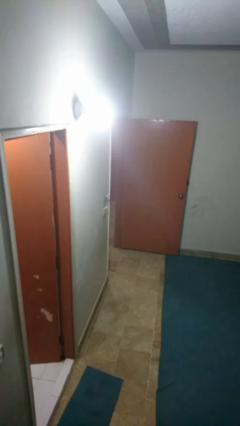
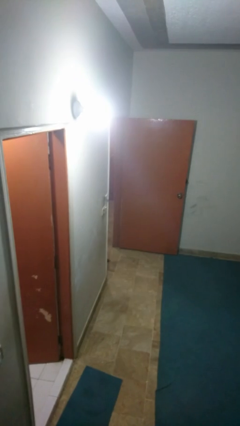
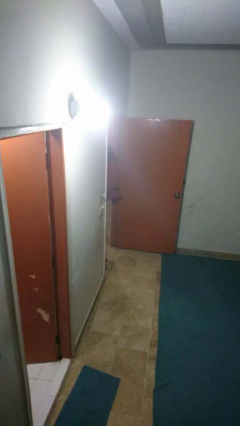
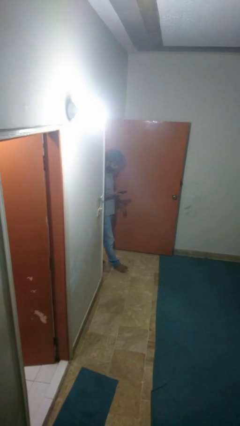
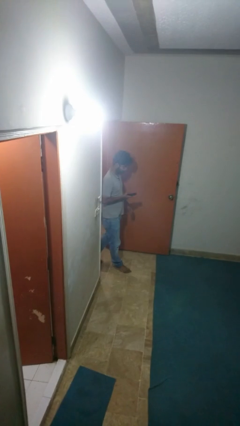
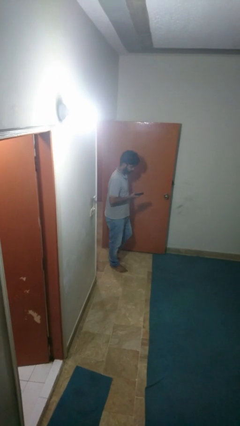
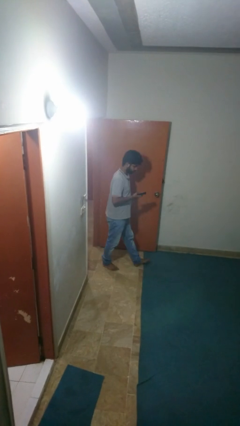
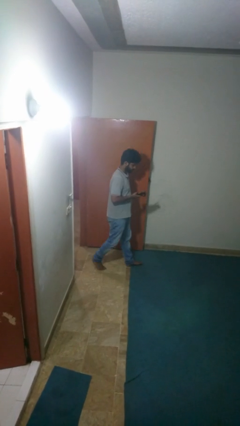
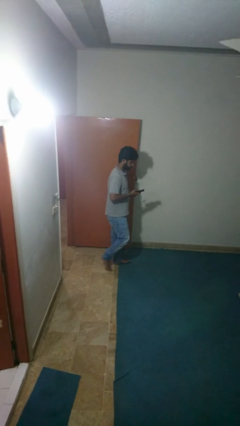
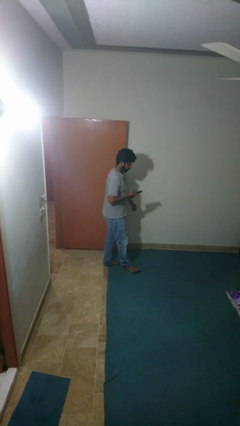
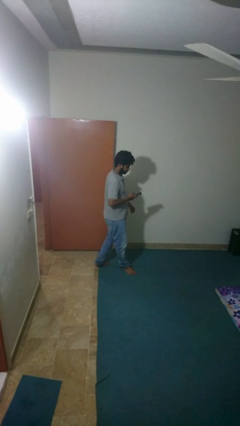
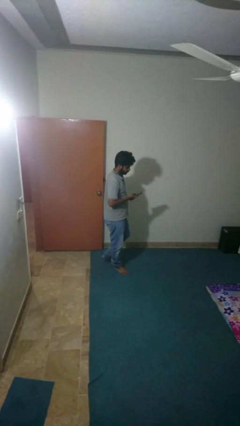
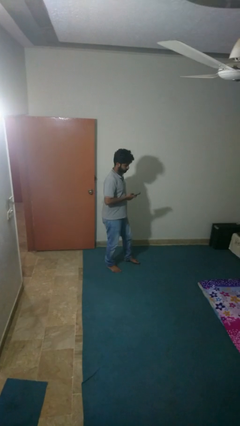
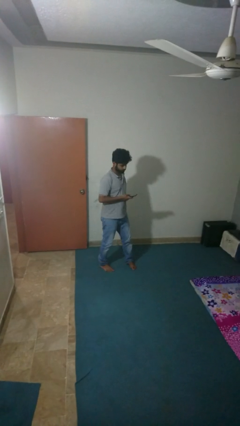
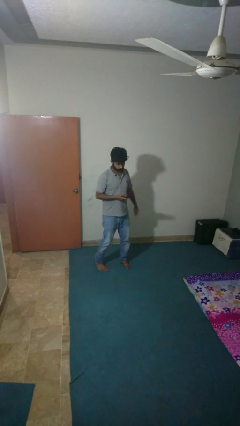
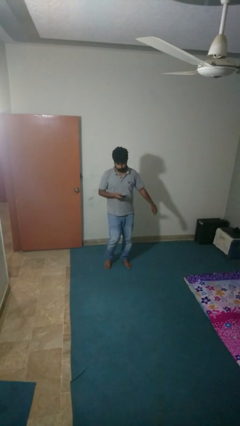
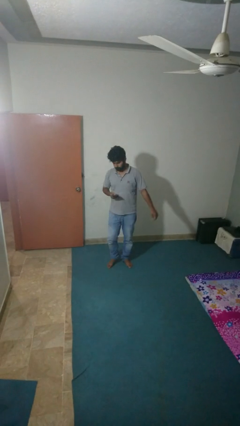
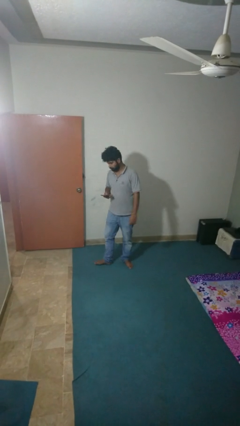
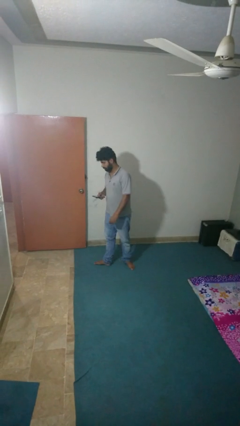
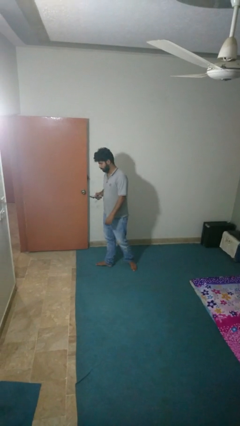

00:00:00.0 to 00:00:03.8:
person enters scene through structure

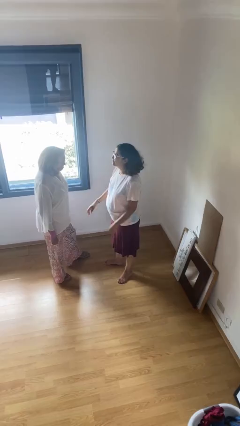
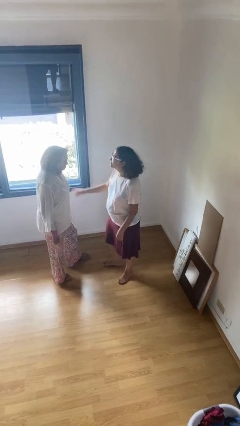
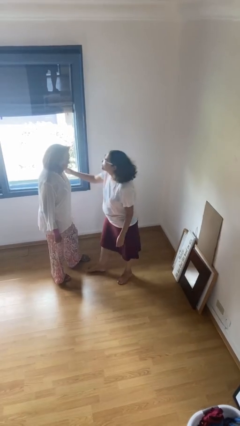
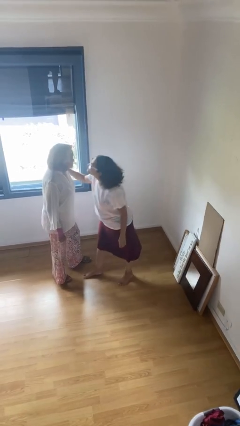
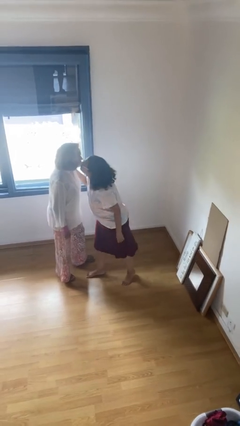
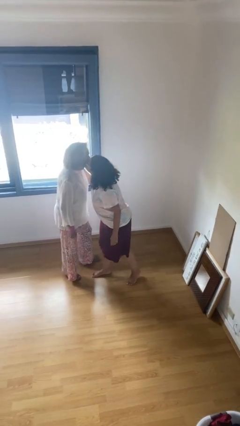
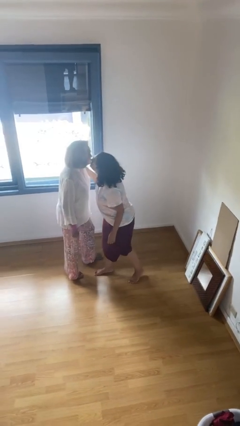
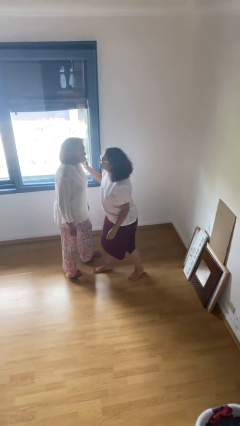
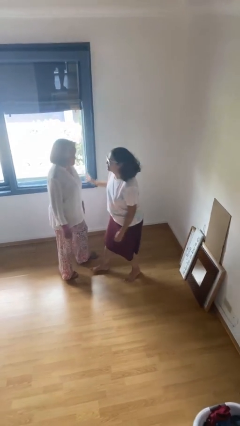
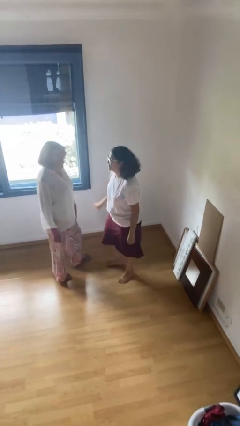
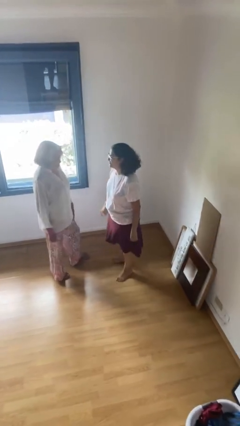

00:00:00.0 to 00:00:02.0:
person kisses cheek of person

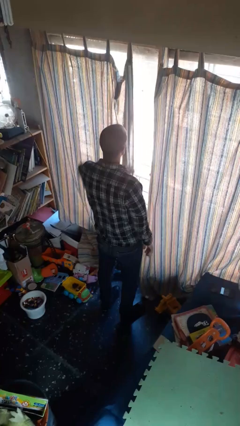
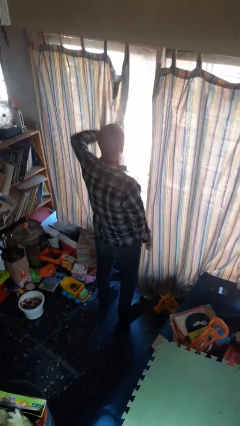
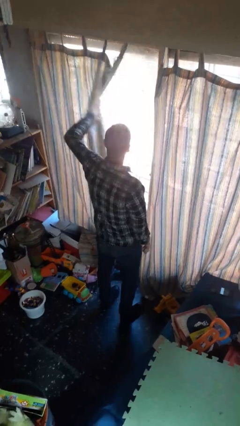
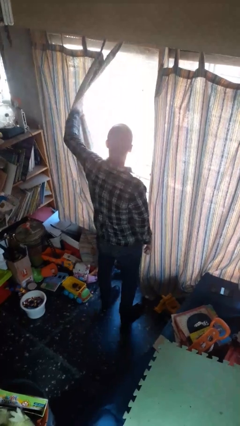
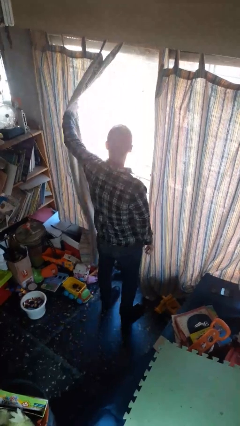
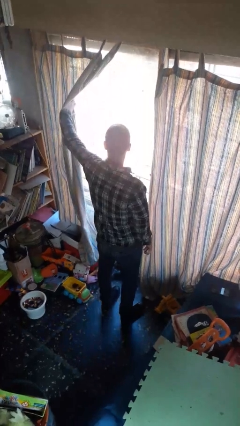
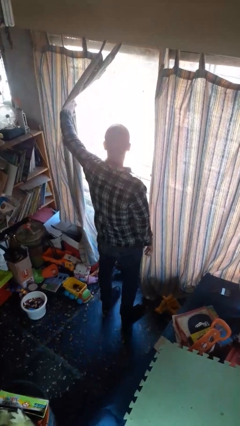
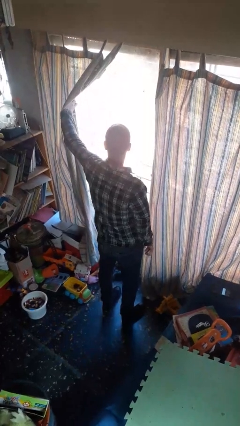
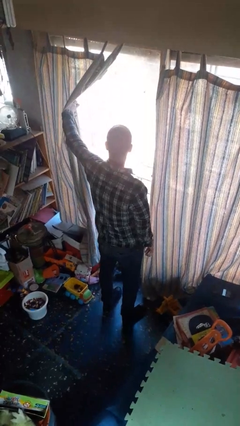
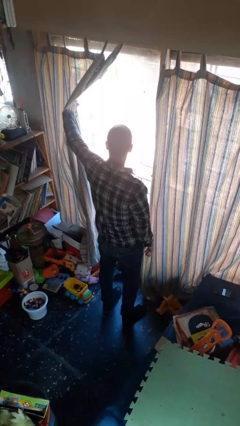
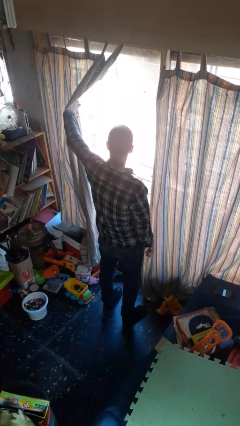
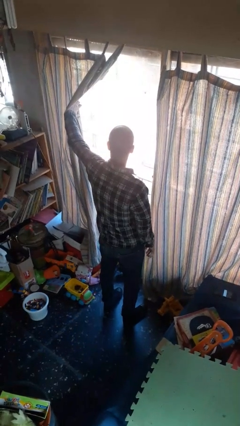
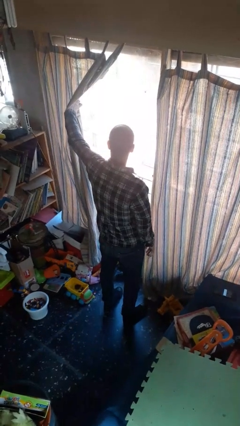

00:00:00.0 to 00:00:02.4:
person opens curtains

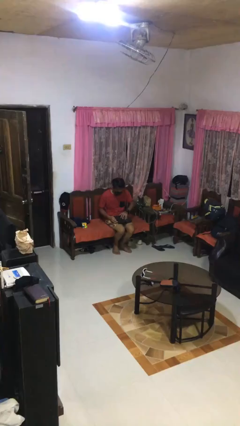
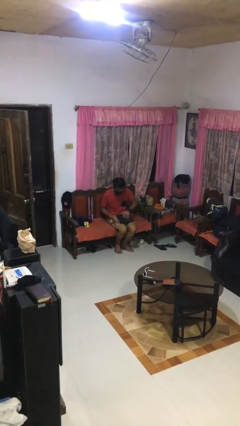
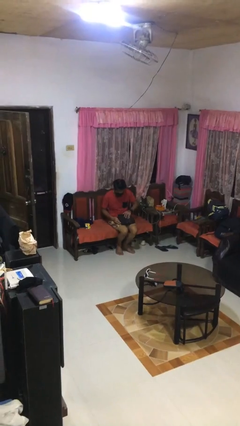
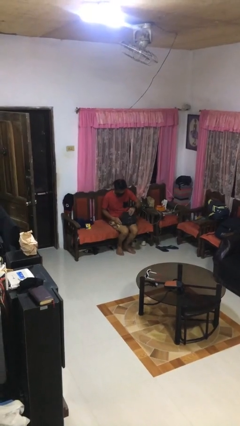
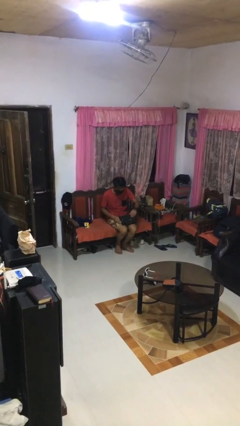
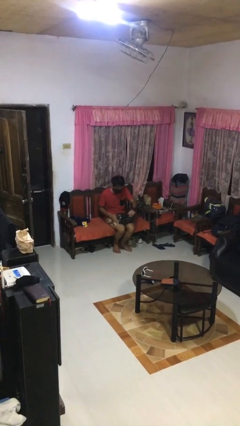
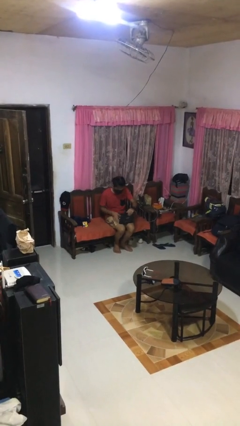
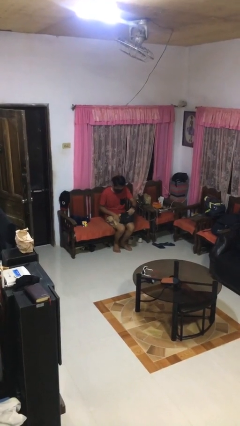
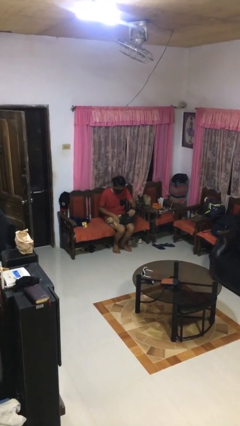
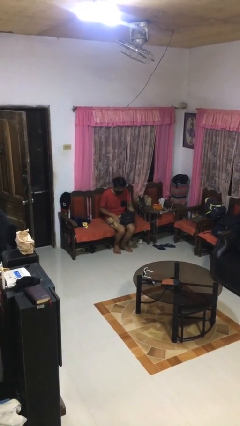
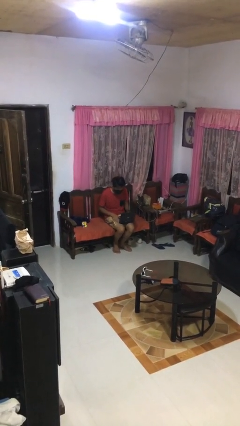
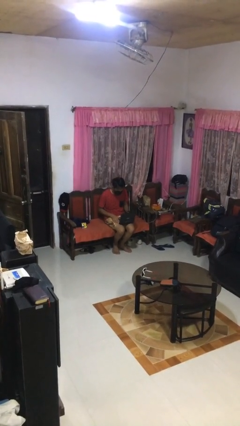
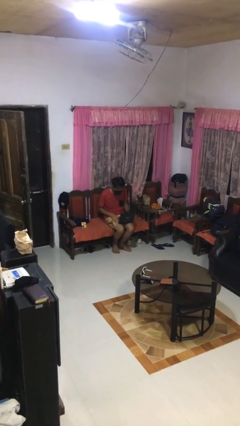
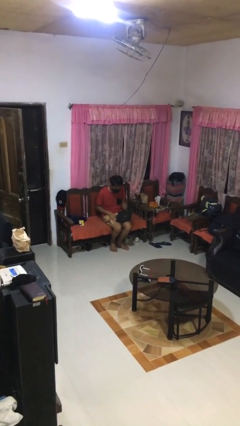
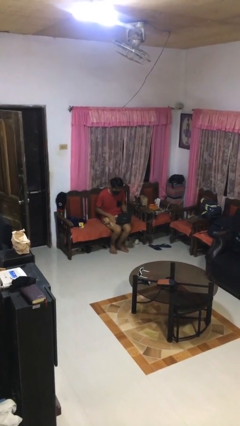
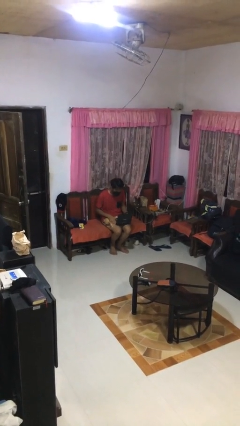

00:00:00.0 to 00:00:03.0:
person opens laptop

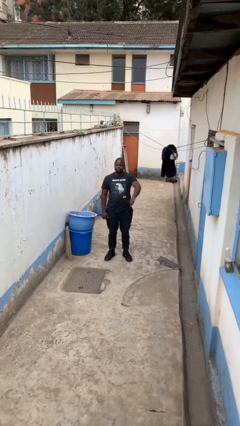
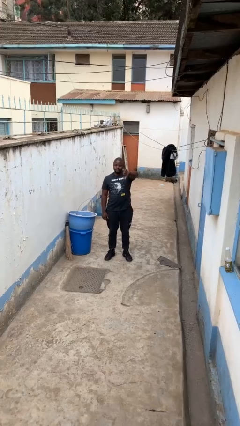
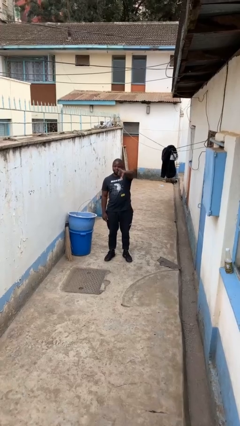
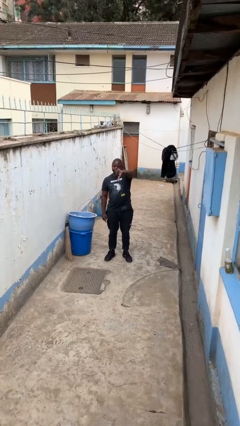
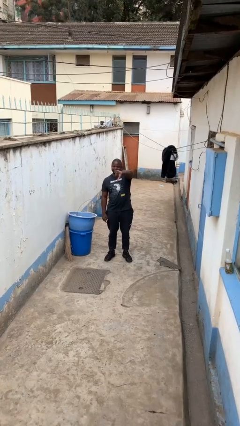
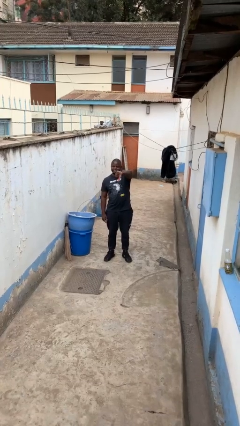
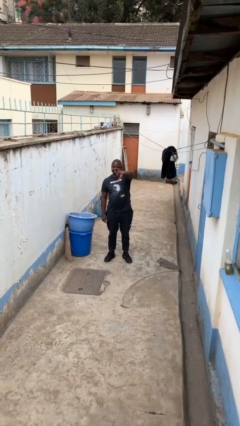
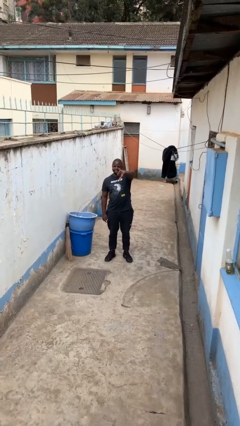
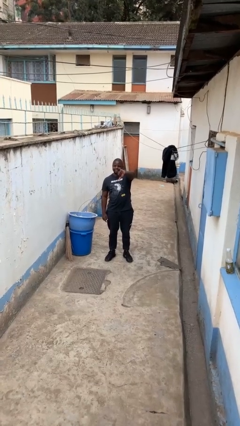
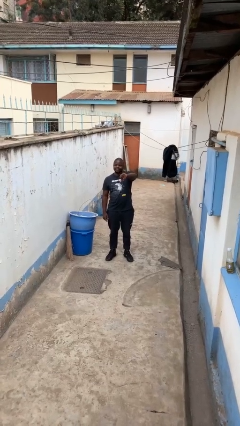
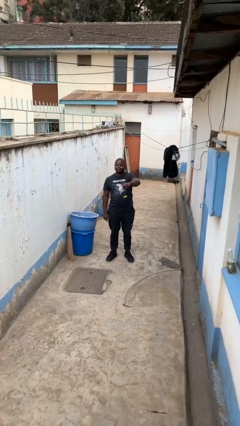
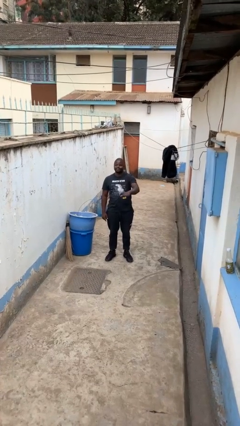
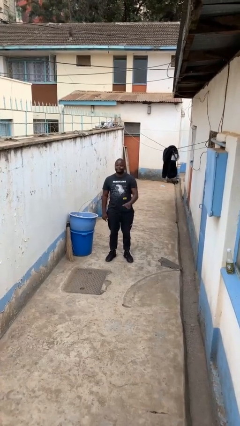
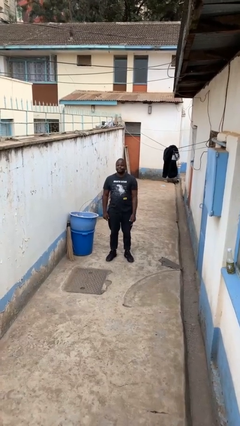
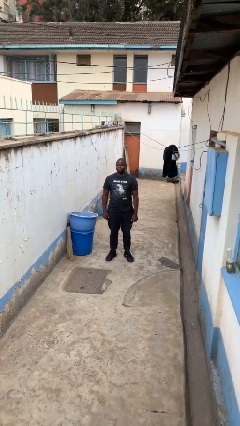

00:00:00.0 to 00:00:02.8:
person gestures thumbs down

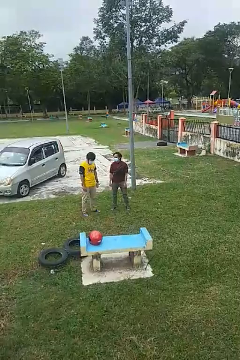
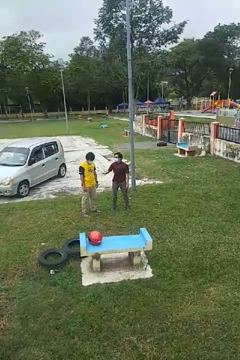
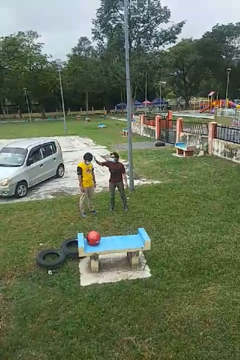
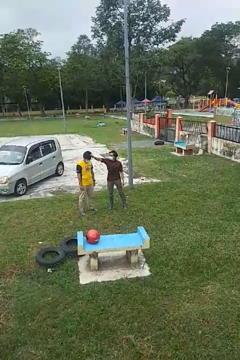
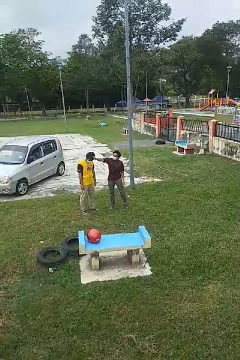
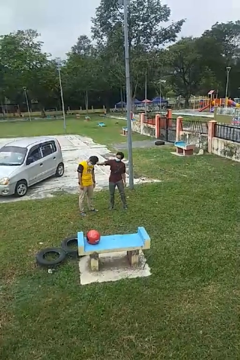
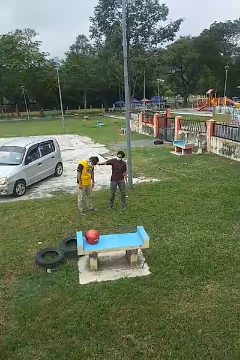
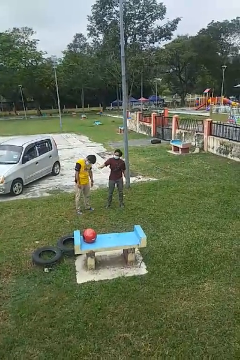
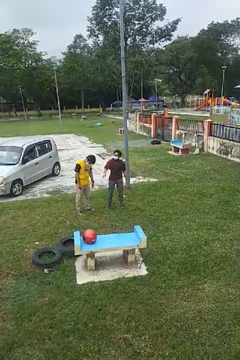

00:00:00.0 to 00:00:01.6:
person grabs person by hair

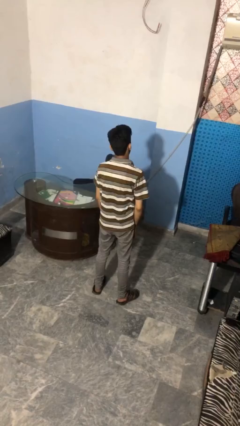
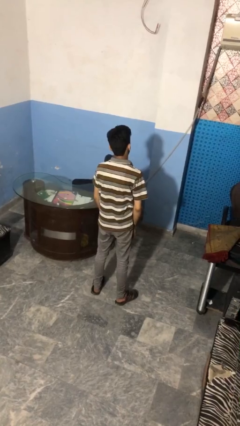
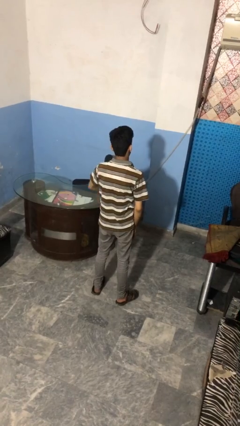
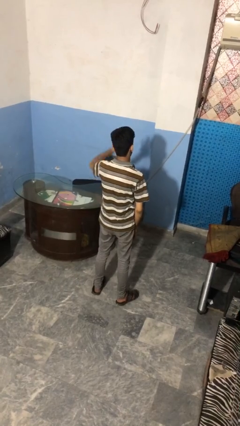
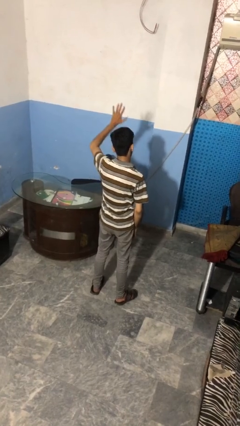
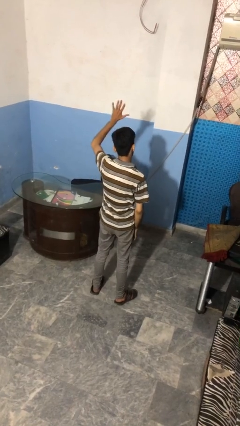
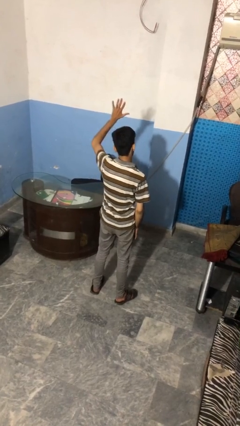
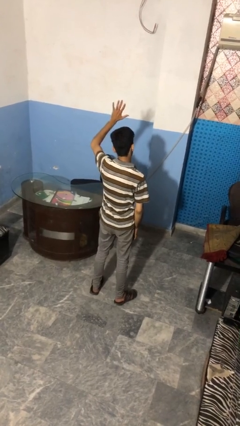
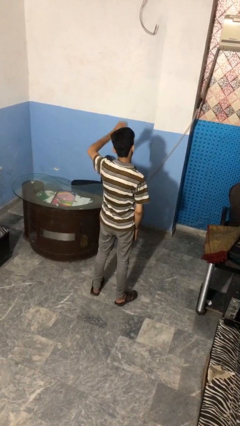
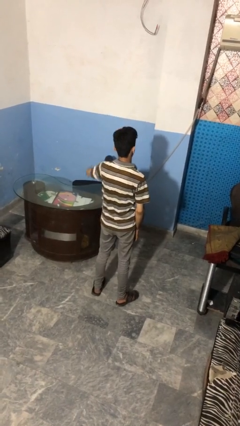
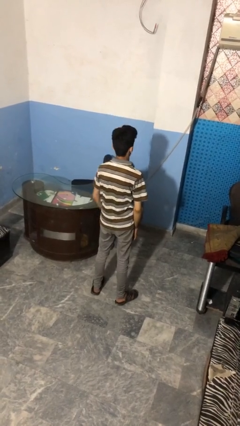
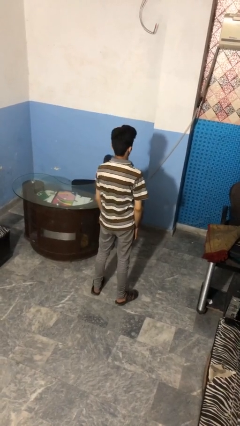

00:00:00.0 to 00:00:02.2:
person gestures number five
